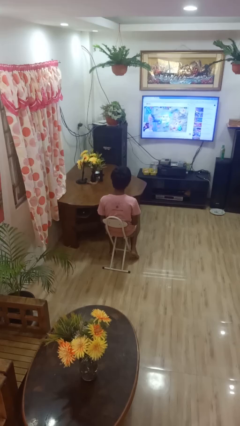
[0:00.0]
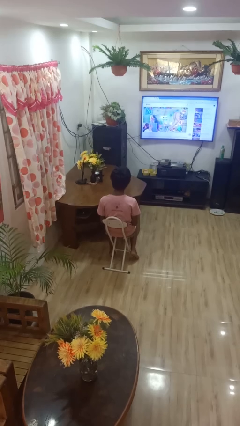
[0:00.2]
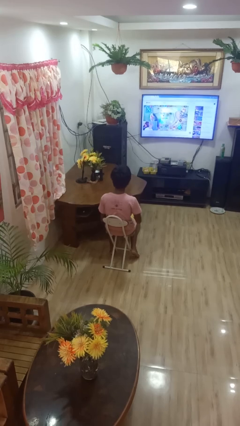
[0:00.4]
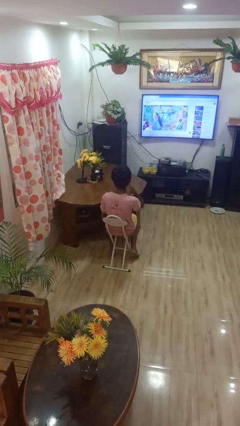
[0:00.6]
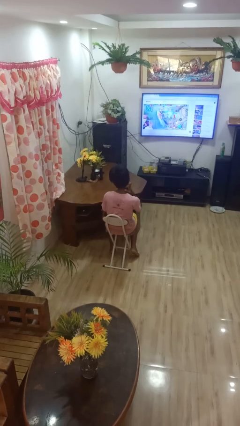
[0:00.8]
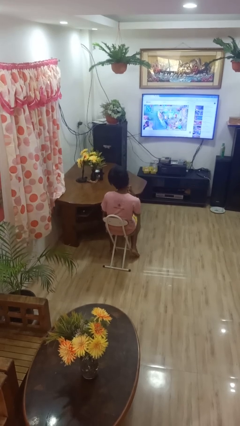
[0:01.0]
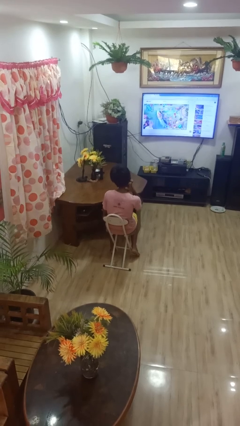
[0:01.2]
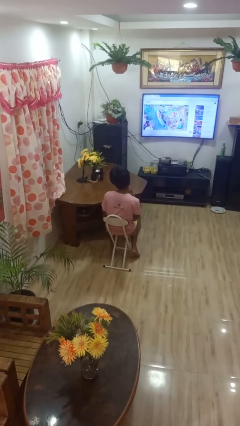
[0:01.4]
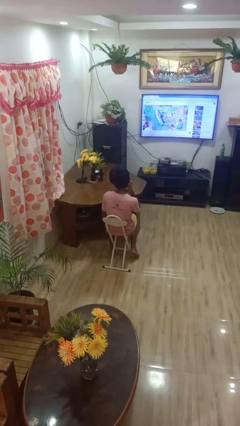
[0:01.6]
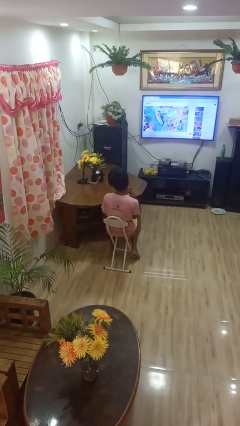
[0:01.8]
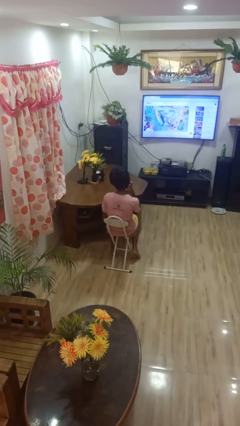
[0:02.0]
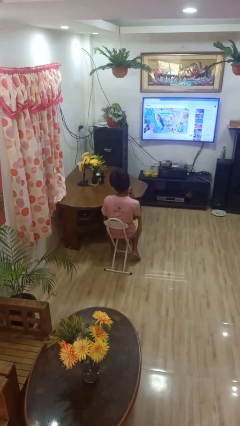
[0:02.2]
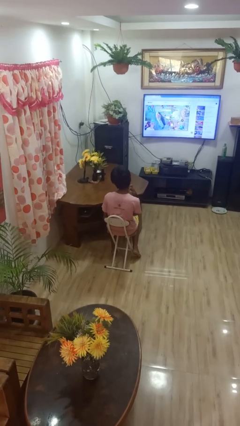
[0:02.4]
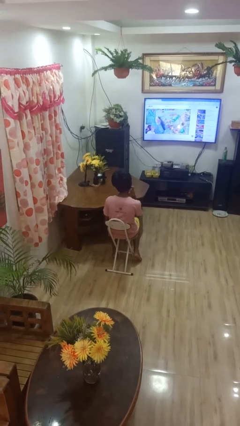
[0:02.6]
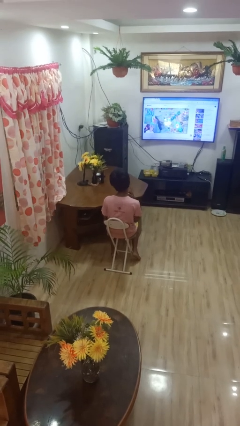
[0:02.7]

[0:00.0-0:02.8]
person rubs neck

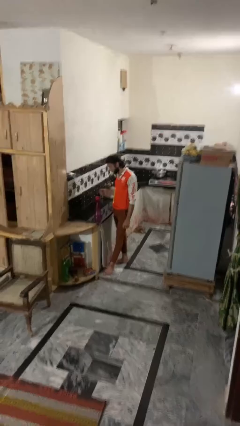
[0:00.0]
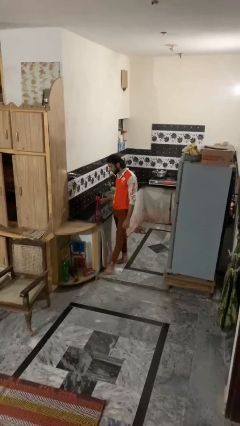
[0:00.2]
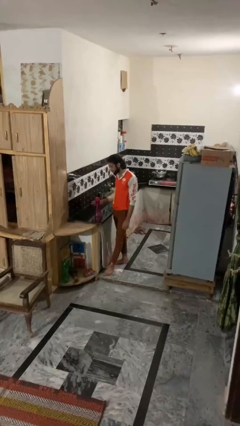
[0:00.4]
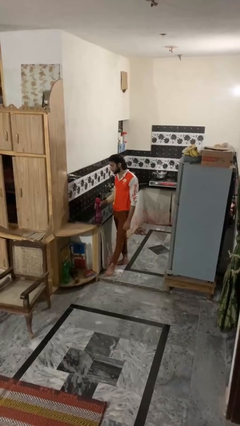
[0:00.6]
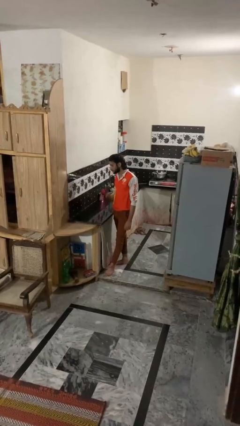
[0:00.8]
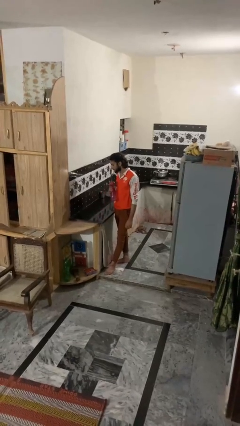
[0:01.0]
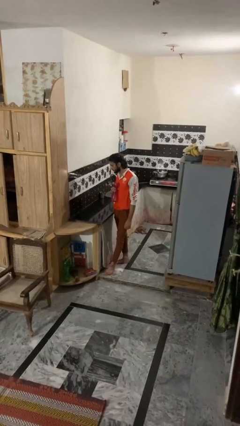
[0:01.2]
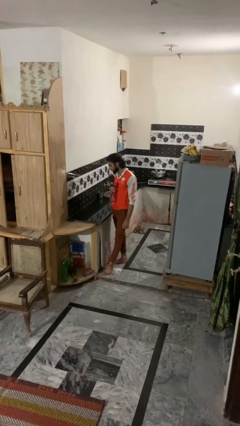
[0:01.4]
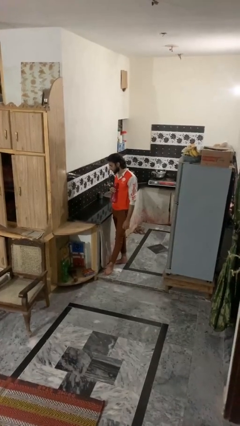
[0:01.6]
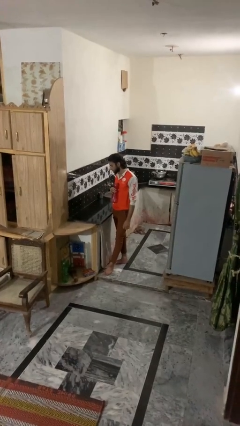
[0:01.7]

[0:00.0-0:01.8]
person picks up object from countertop

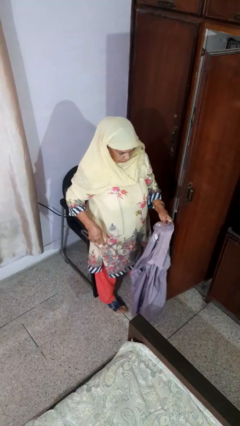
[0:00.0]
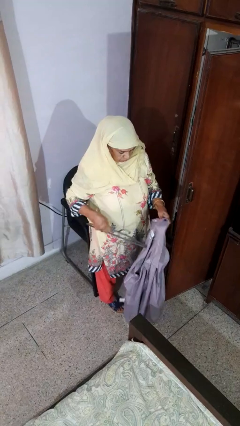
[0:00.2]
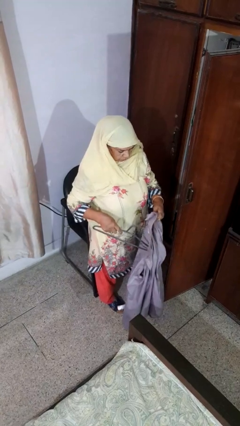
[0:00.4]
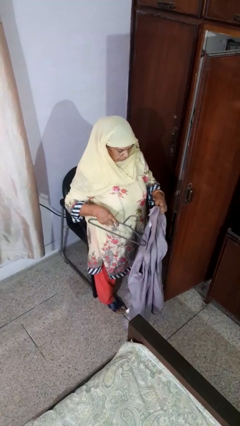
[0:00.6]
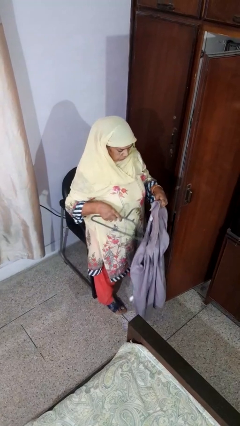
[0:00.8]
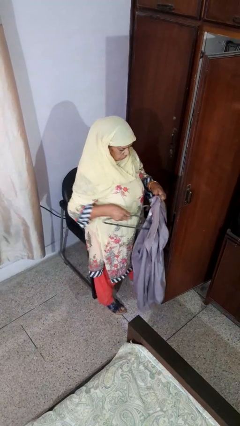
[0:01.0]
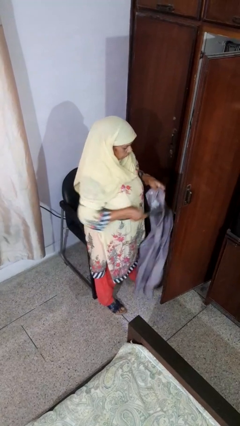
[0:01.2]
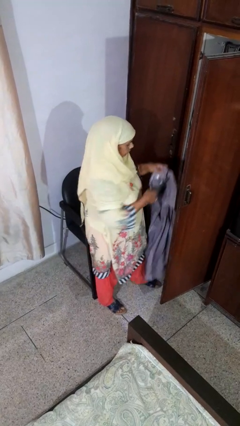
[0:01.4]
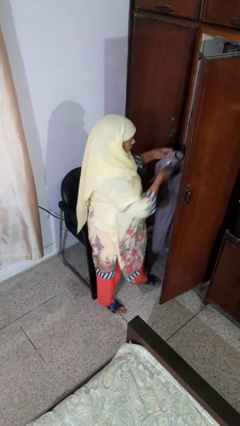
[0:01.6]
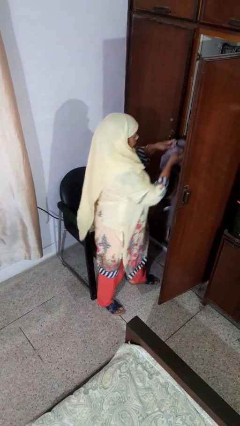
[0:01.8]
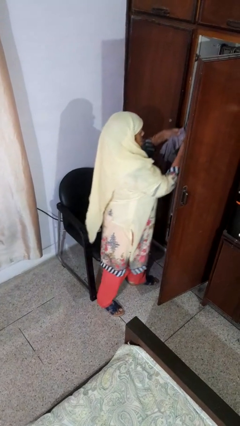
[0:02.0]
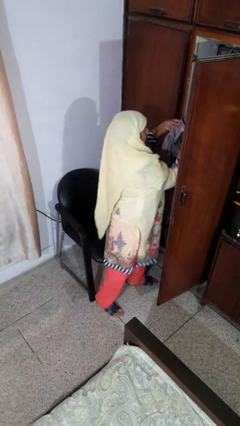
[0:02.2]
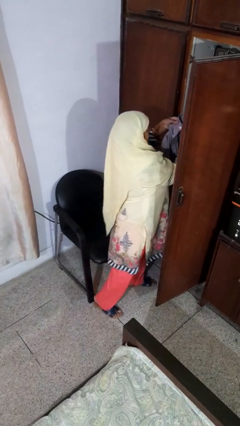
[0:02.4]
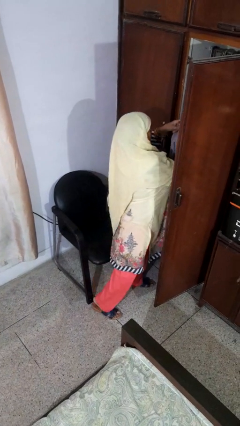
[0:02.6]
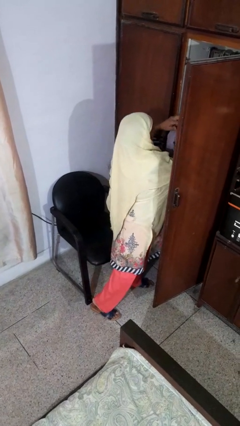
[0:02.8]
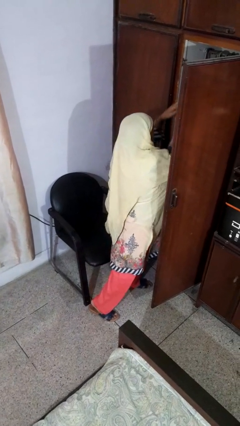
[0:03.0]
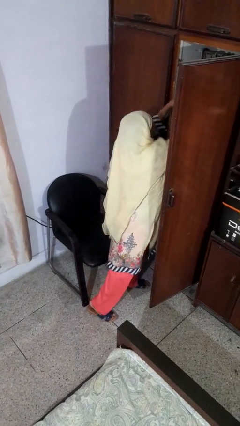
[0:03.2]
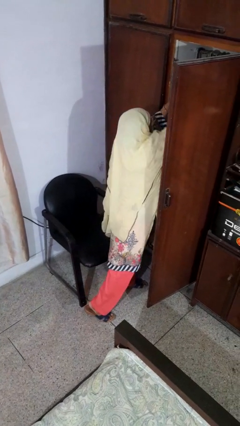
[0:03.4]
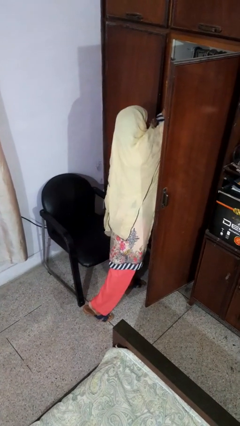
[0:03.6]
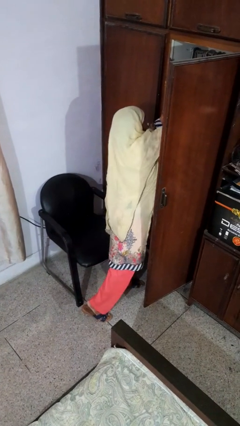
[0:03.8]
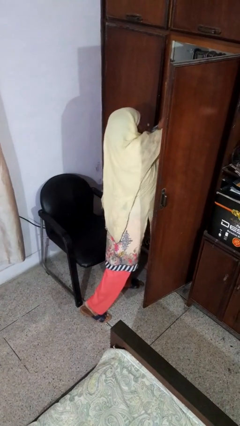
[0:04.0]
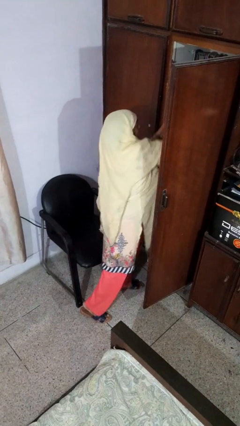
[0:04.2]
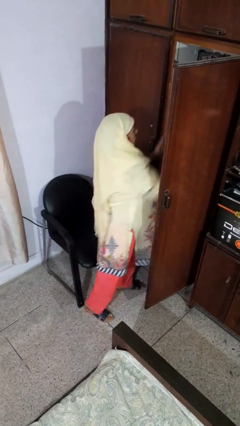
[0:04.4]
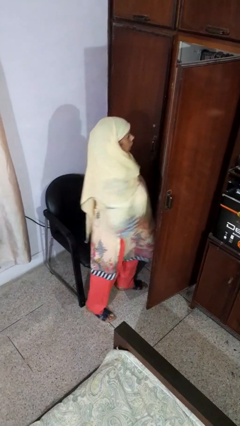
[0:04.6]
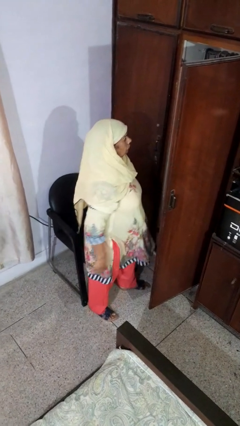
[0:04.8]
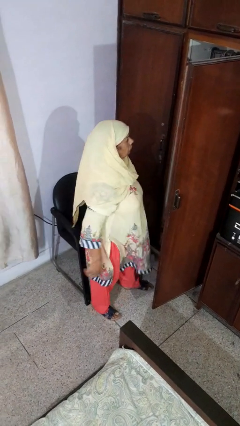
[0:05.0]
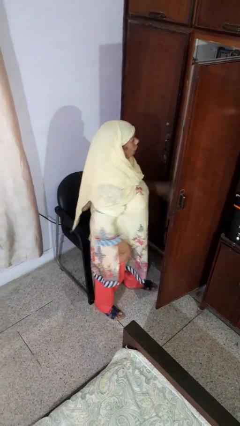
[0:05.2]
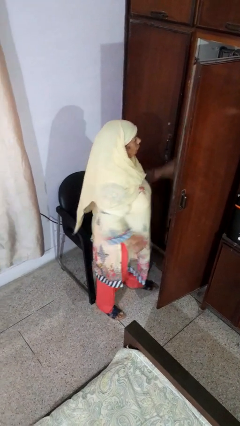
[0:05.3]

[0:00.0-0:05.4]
person puts clothes into closet

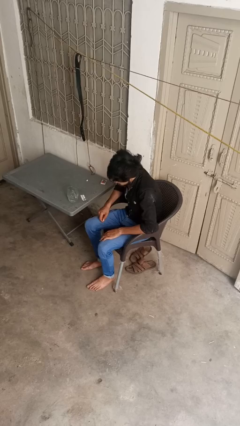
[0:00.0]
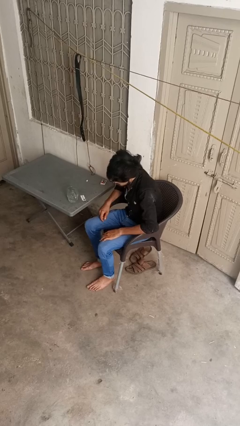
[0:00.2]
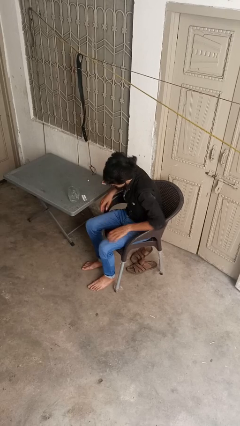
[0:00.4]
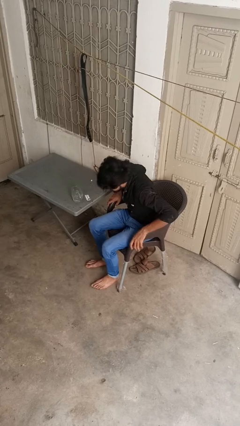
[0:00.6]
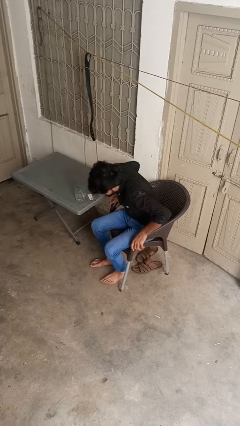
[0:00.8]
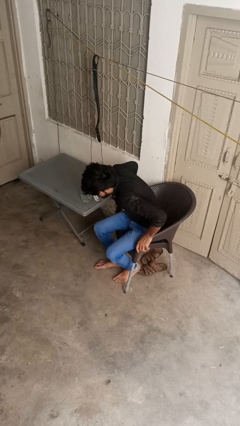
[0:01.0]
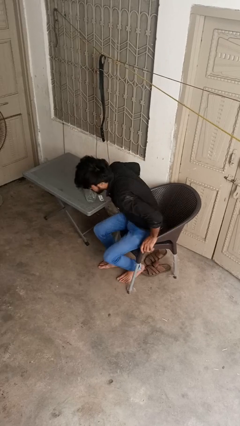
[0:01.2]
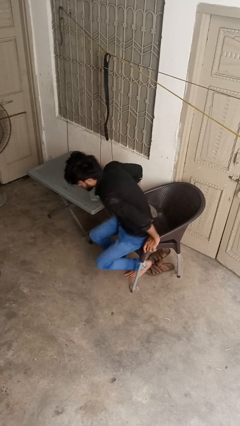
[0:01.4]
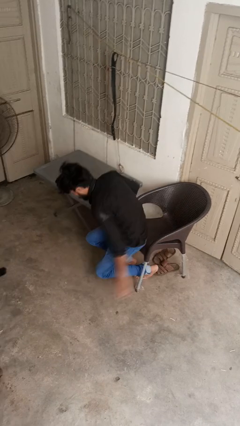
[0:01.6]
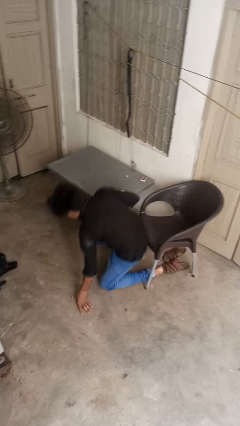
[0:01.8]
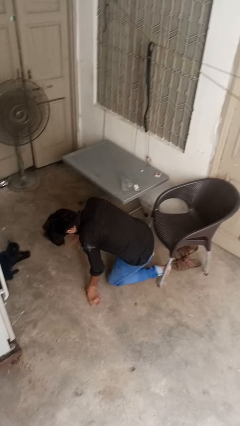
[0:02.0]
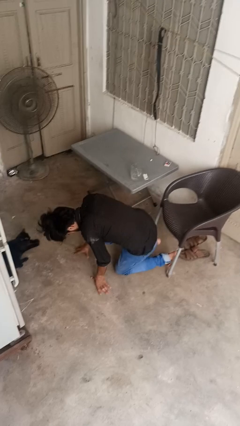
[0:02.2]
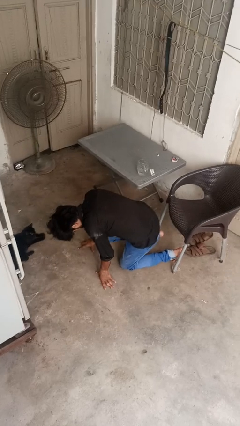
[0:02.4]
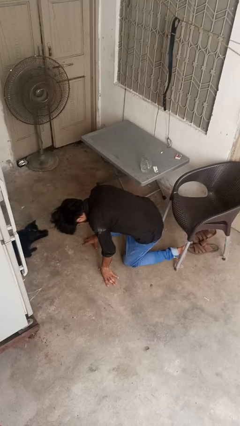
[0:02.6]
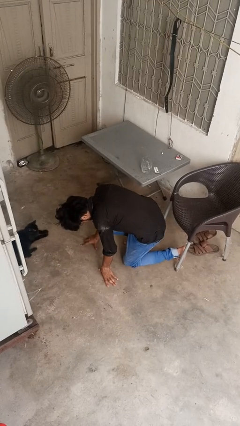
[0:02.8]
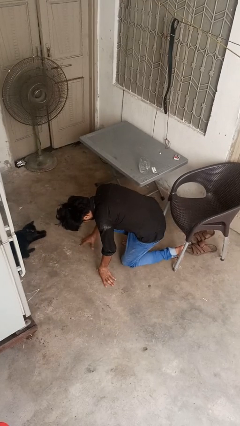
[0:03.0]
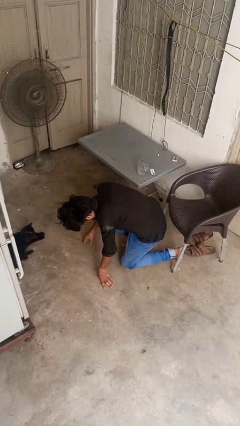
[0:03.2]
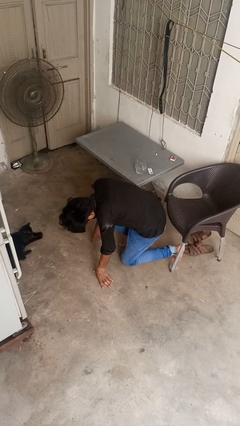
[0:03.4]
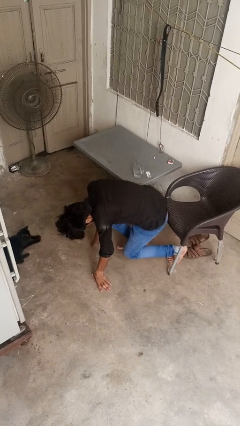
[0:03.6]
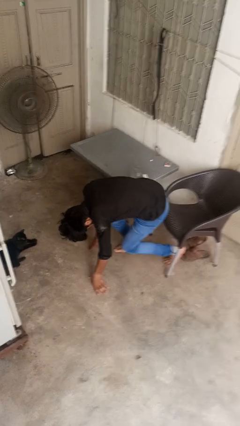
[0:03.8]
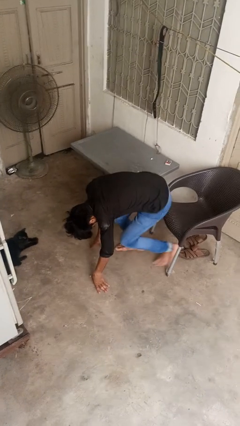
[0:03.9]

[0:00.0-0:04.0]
person falls from chair

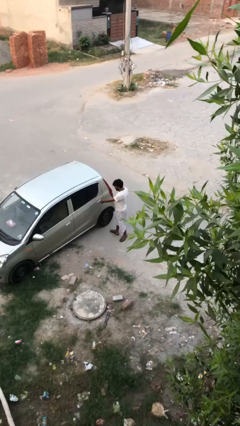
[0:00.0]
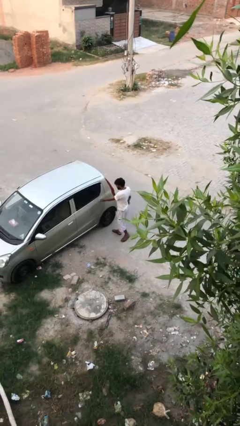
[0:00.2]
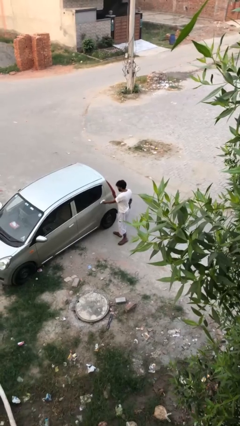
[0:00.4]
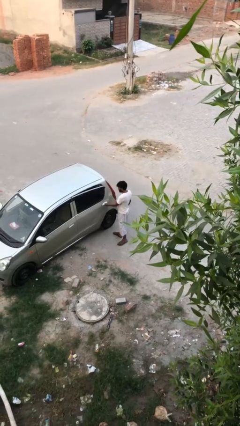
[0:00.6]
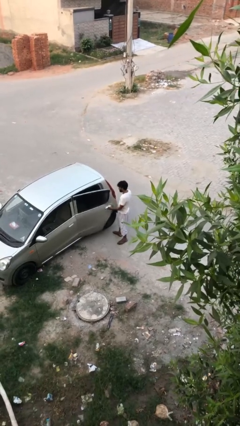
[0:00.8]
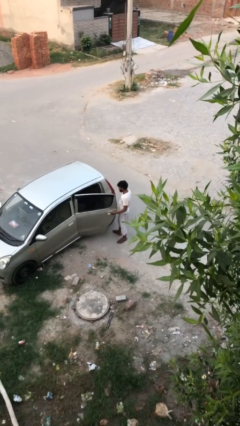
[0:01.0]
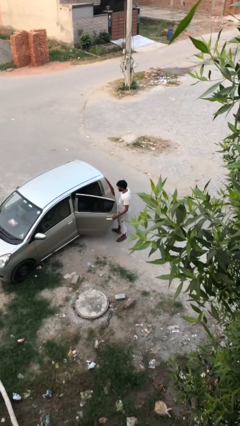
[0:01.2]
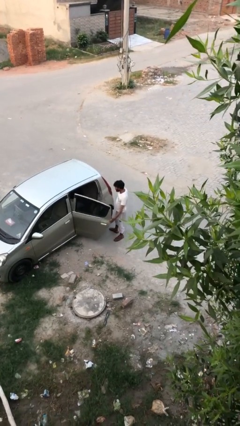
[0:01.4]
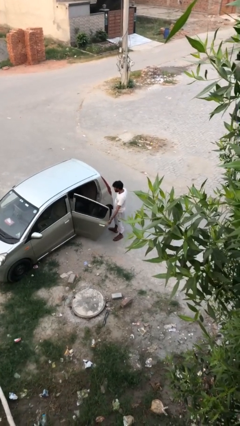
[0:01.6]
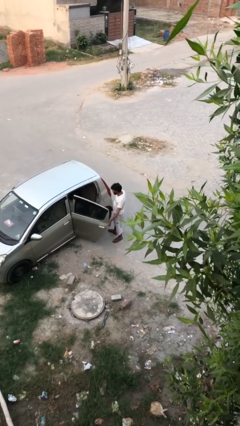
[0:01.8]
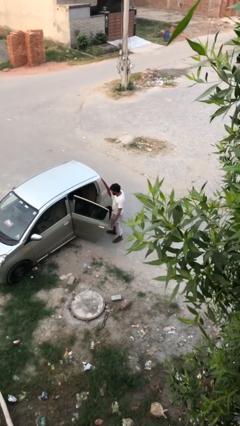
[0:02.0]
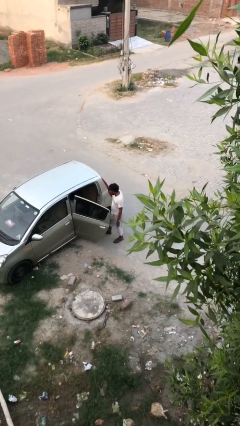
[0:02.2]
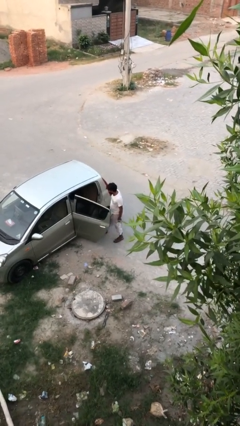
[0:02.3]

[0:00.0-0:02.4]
person opens car door

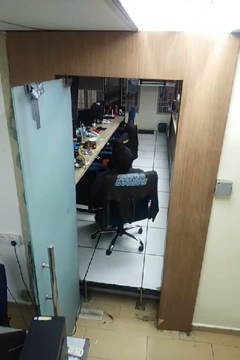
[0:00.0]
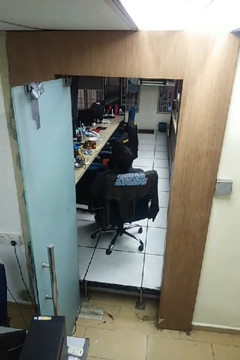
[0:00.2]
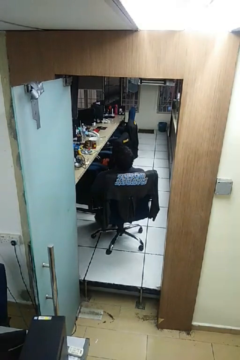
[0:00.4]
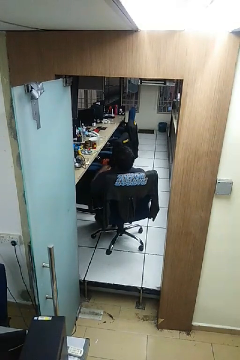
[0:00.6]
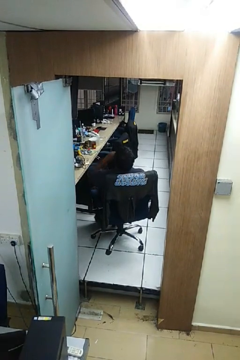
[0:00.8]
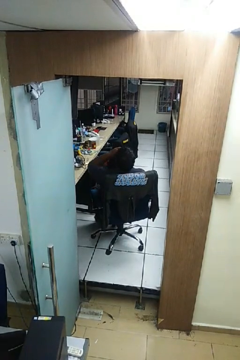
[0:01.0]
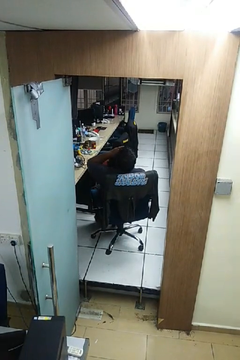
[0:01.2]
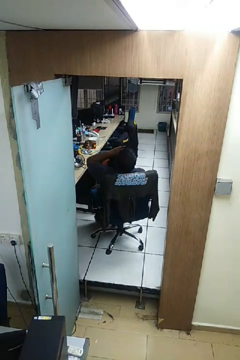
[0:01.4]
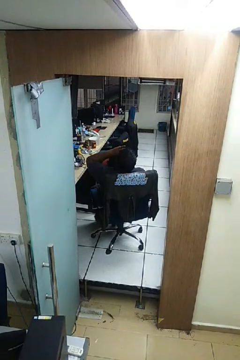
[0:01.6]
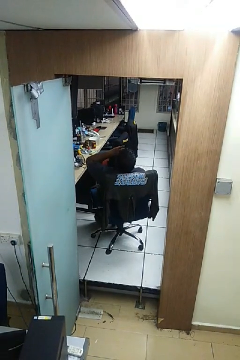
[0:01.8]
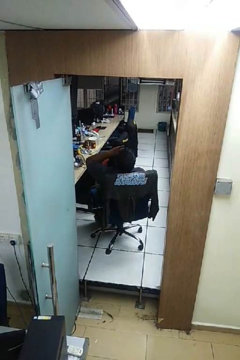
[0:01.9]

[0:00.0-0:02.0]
person yawns
